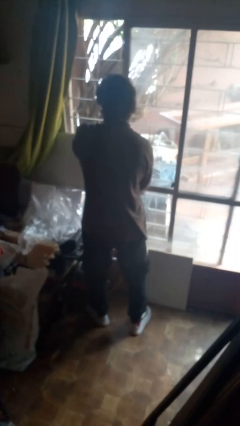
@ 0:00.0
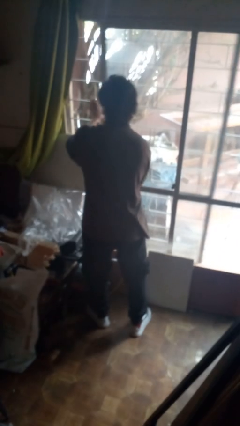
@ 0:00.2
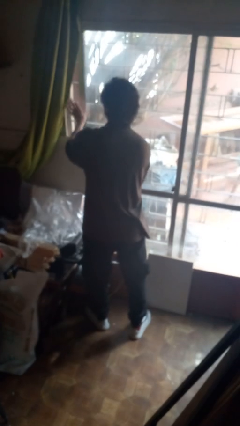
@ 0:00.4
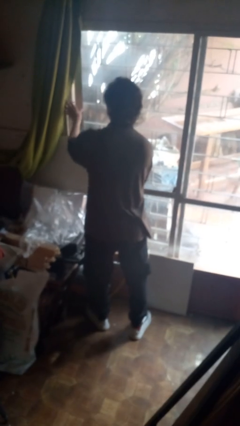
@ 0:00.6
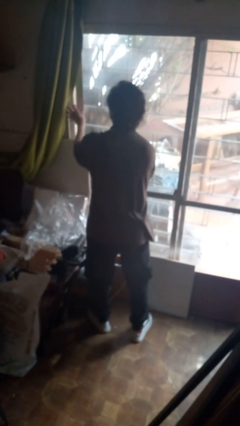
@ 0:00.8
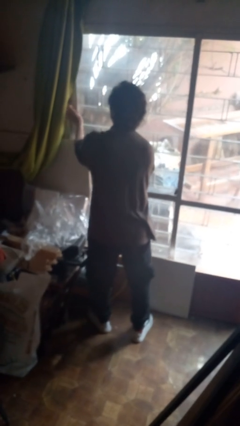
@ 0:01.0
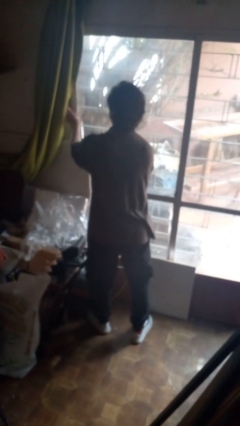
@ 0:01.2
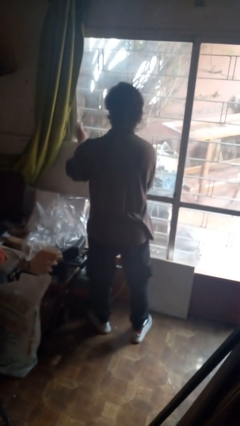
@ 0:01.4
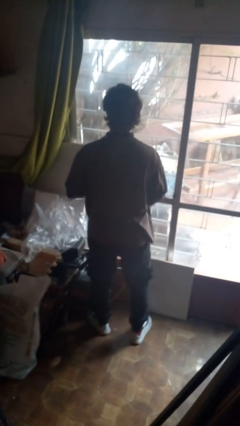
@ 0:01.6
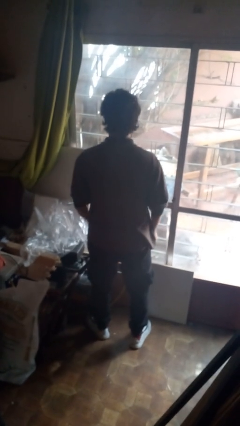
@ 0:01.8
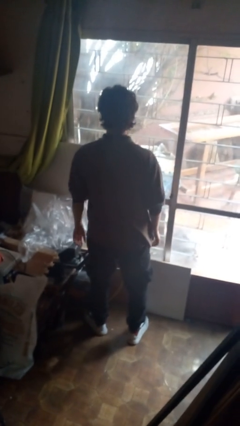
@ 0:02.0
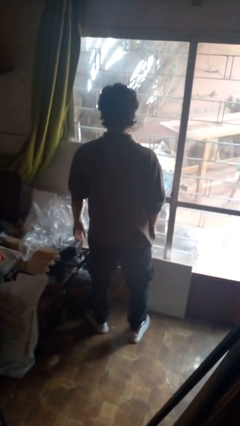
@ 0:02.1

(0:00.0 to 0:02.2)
person closes sliding door

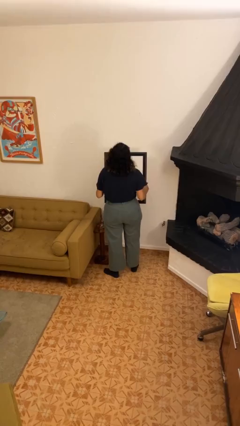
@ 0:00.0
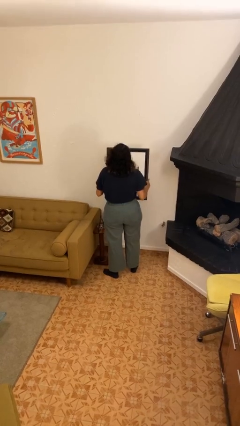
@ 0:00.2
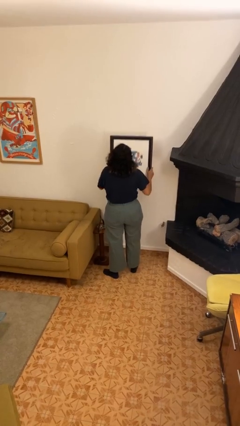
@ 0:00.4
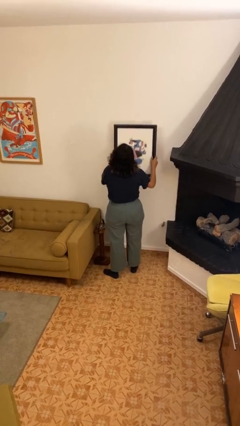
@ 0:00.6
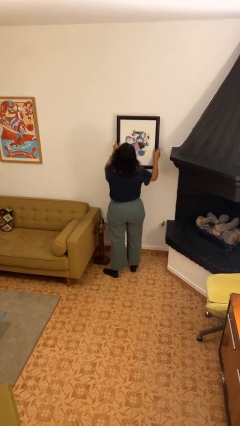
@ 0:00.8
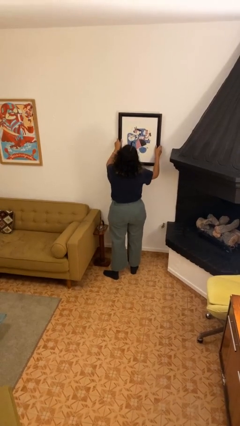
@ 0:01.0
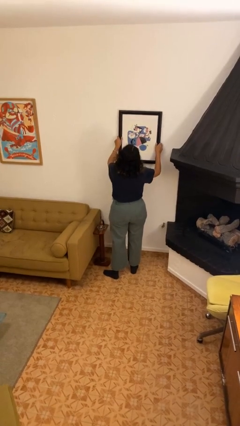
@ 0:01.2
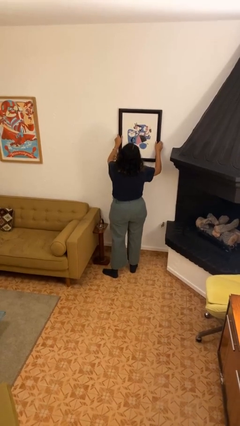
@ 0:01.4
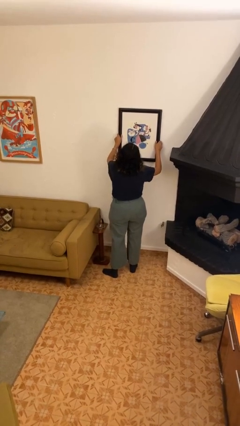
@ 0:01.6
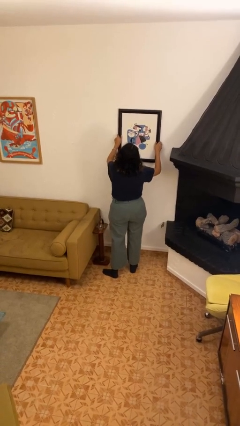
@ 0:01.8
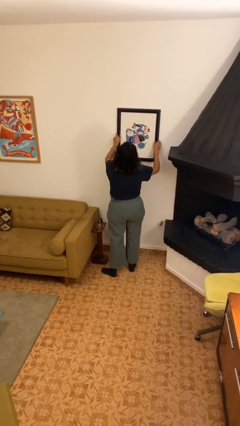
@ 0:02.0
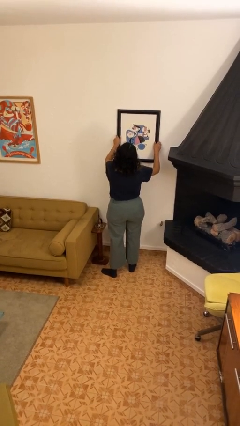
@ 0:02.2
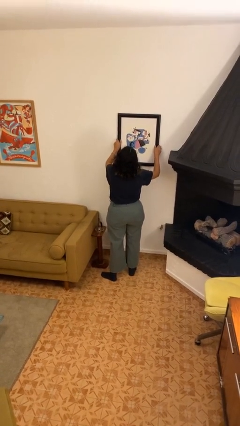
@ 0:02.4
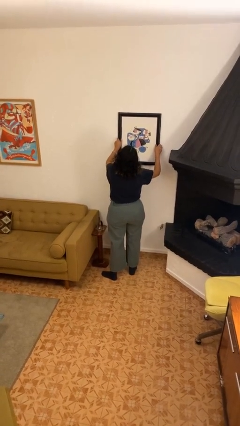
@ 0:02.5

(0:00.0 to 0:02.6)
person puts up picture frame

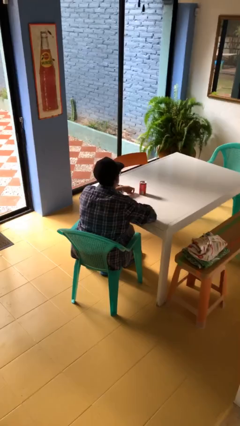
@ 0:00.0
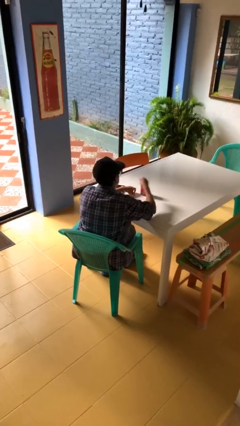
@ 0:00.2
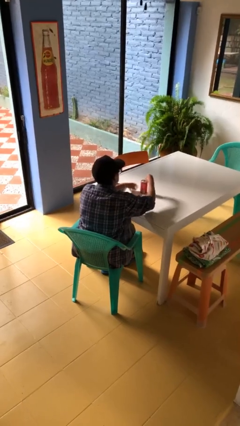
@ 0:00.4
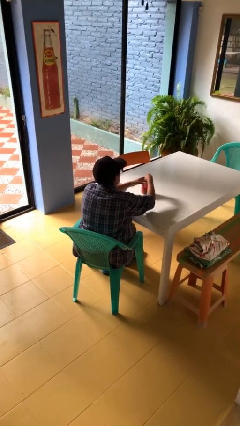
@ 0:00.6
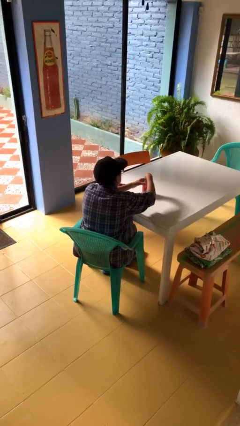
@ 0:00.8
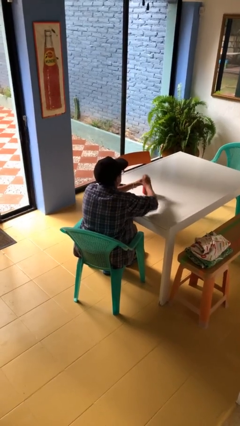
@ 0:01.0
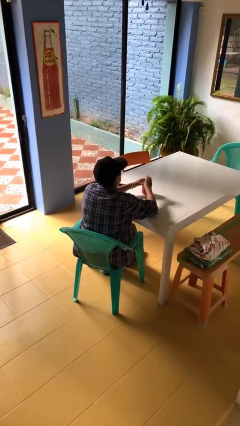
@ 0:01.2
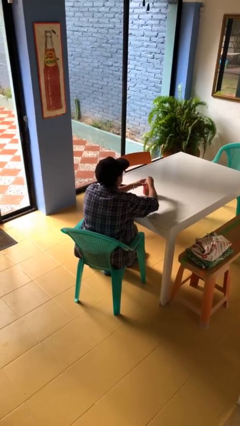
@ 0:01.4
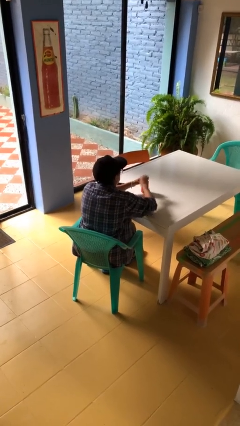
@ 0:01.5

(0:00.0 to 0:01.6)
person opens beverage can

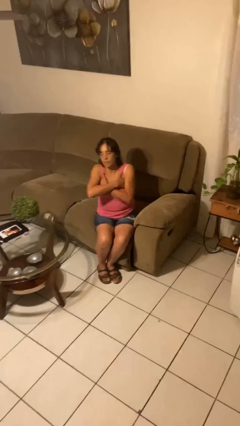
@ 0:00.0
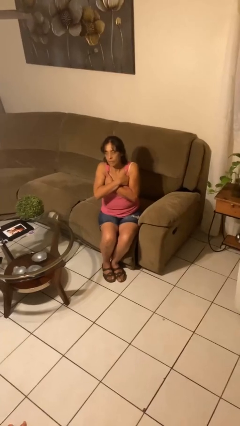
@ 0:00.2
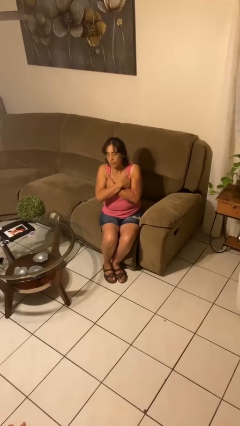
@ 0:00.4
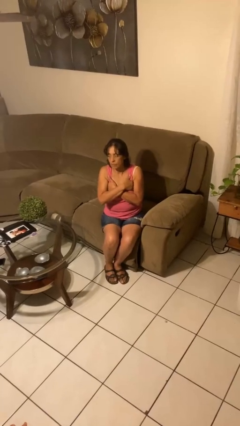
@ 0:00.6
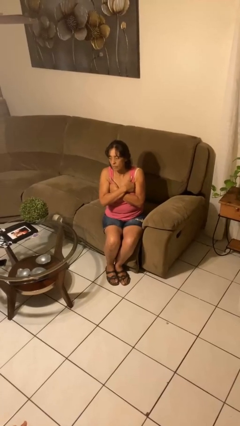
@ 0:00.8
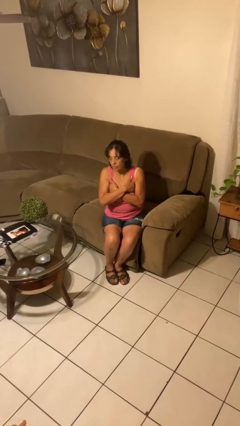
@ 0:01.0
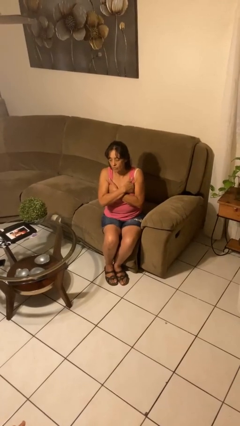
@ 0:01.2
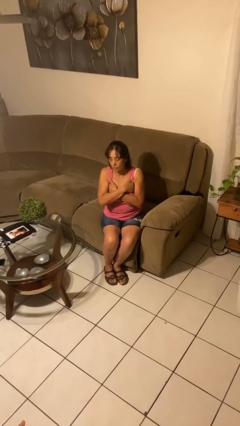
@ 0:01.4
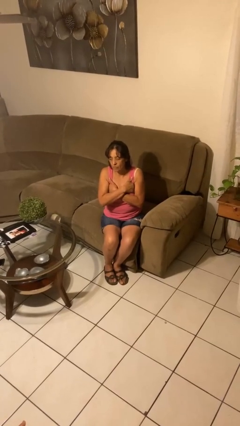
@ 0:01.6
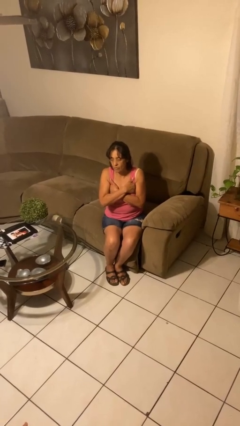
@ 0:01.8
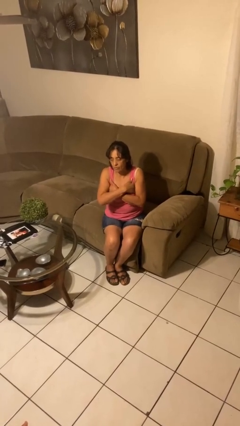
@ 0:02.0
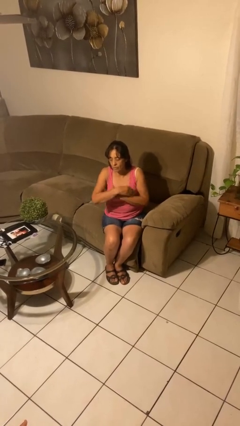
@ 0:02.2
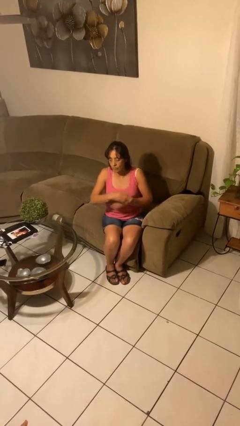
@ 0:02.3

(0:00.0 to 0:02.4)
person gestures arms x

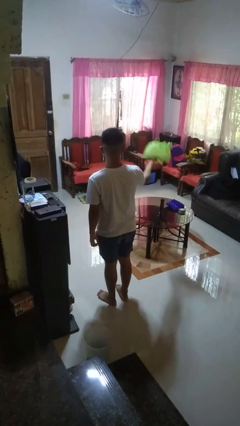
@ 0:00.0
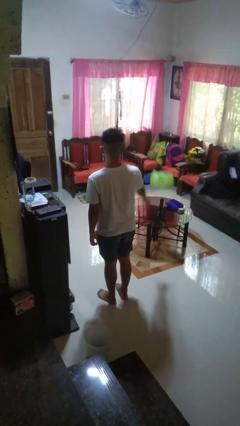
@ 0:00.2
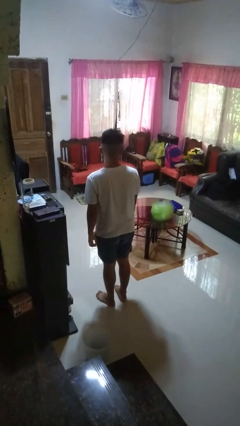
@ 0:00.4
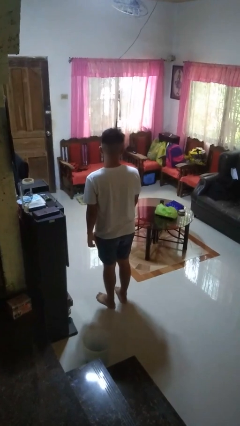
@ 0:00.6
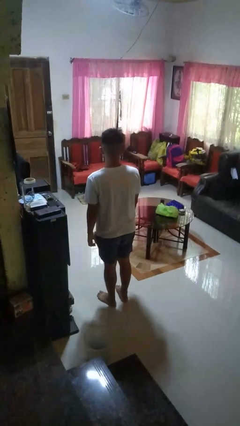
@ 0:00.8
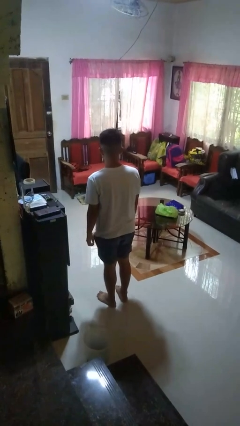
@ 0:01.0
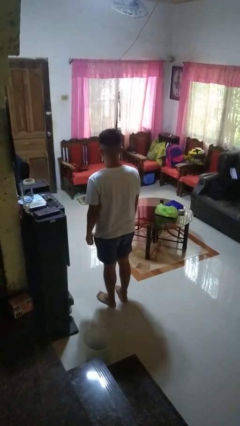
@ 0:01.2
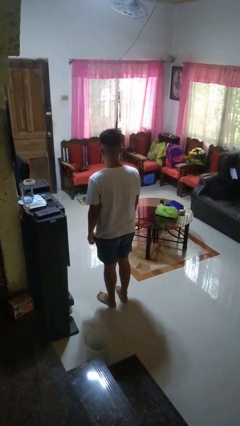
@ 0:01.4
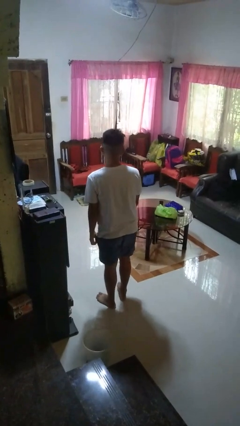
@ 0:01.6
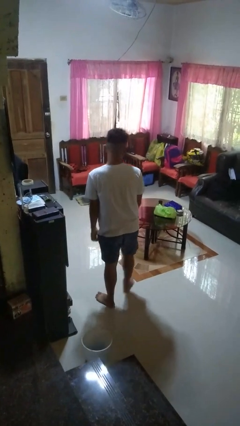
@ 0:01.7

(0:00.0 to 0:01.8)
person throws object on table

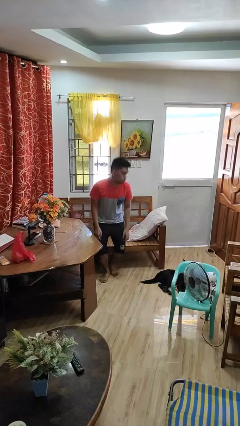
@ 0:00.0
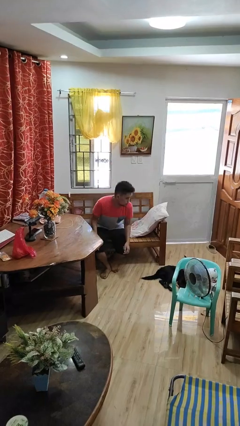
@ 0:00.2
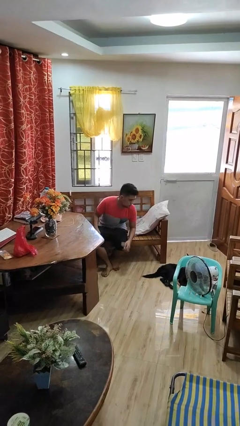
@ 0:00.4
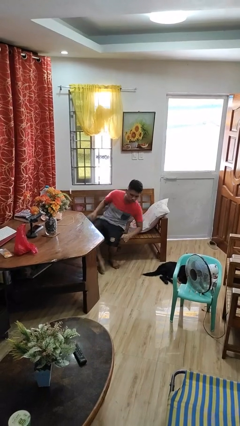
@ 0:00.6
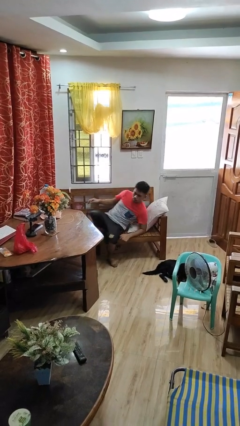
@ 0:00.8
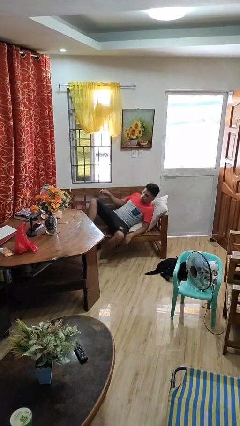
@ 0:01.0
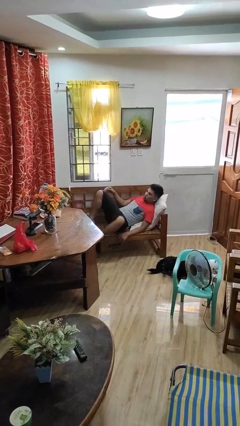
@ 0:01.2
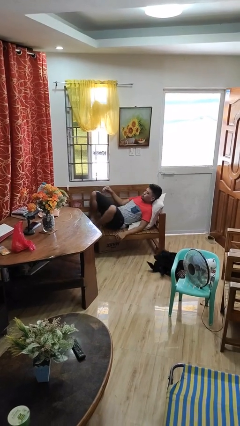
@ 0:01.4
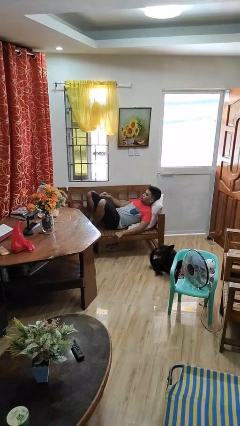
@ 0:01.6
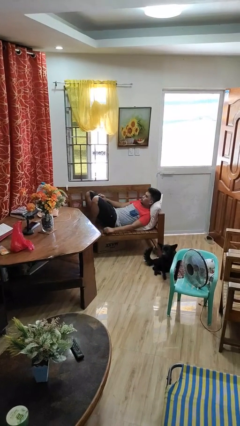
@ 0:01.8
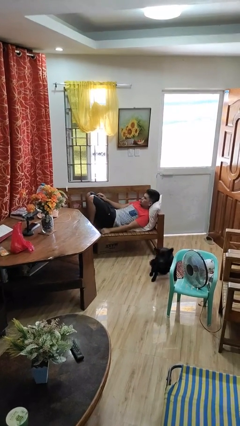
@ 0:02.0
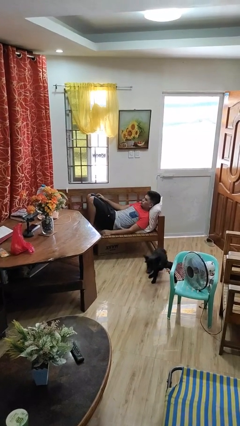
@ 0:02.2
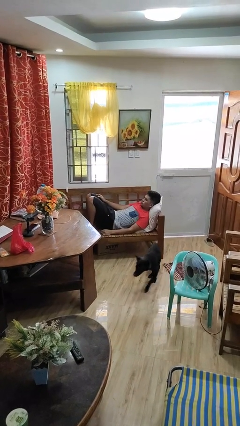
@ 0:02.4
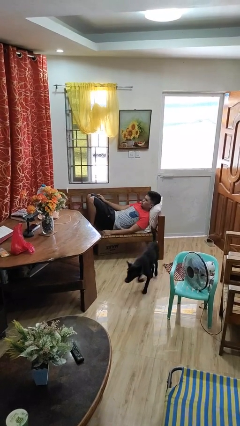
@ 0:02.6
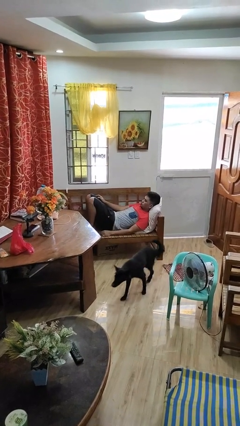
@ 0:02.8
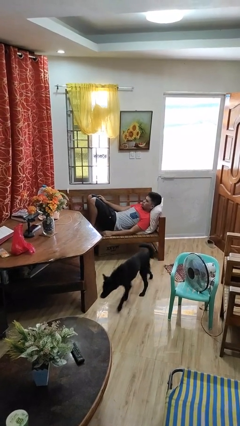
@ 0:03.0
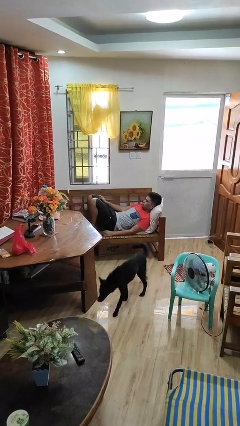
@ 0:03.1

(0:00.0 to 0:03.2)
person lies down on couch

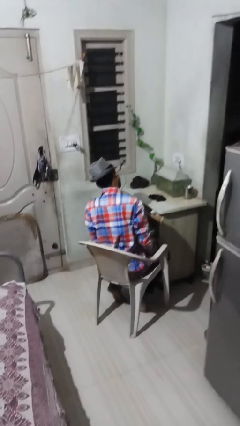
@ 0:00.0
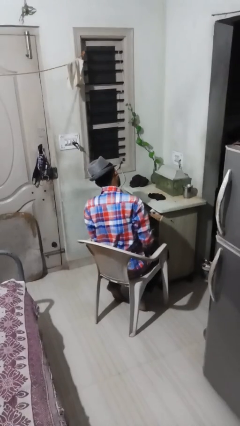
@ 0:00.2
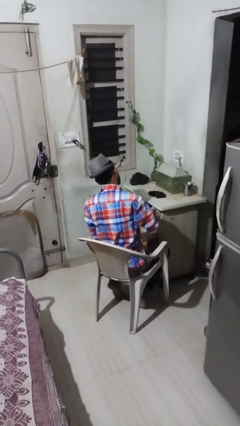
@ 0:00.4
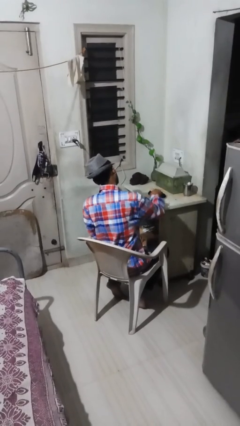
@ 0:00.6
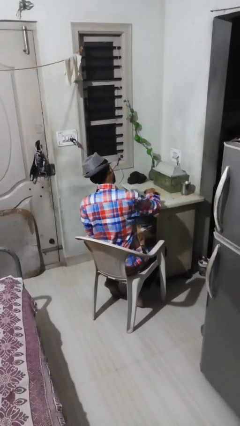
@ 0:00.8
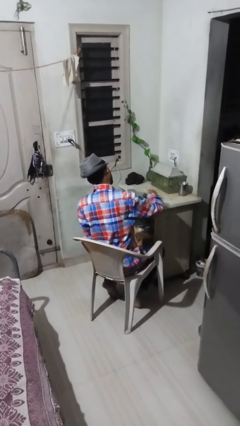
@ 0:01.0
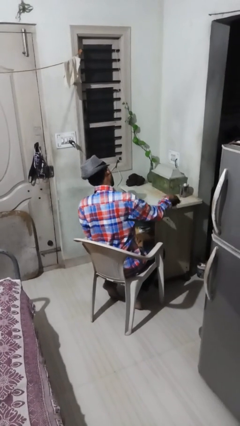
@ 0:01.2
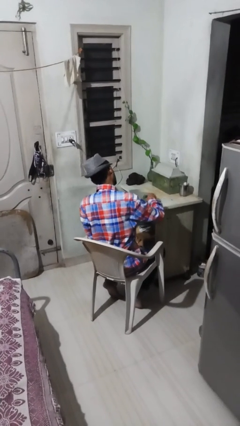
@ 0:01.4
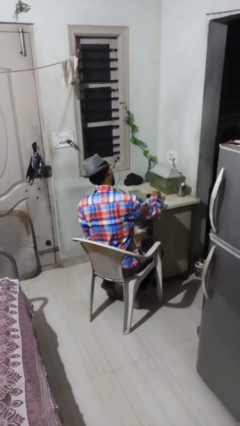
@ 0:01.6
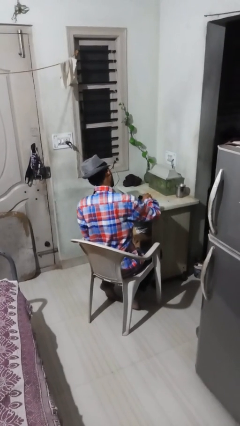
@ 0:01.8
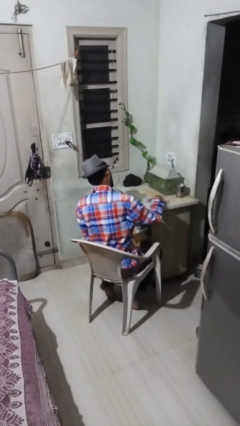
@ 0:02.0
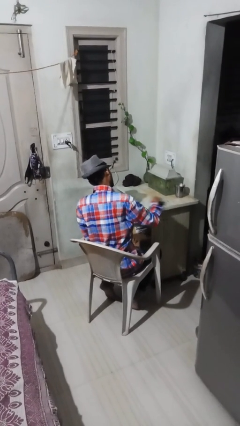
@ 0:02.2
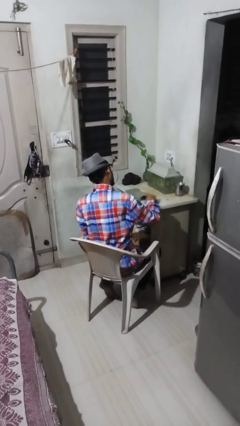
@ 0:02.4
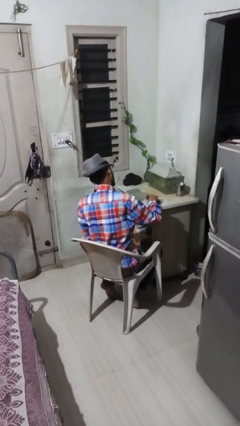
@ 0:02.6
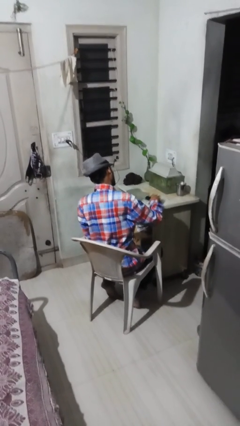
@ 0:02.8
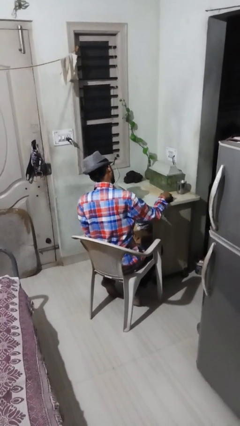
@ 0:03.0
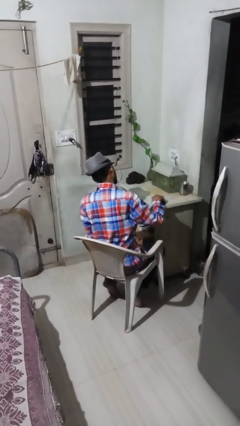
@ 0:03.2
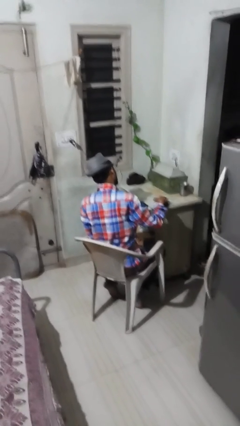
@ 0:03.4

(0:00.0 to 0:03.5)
person cleans table with rag
